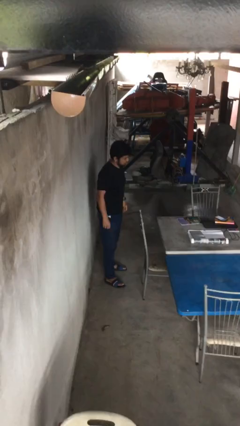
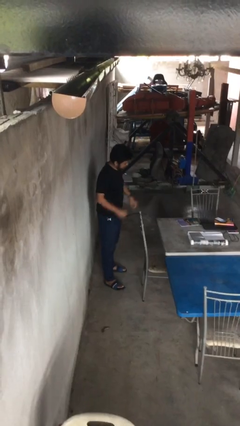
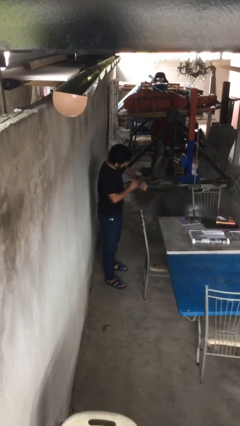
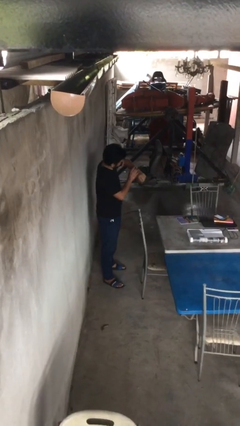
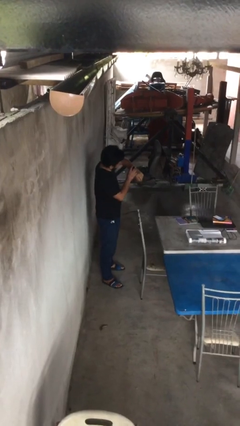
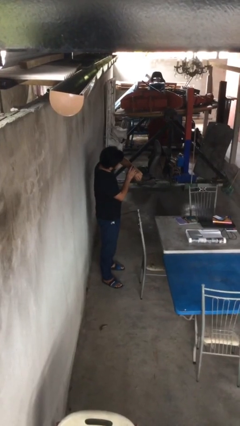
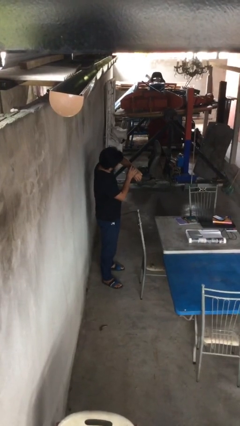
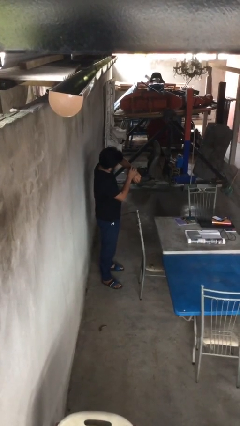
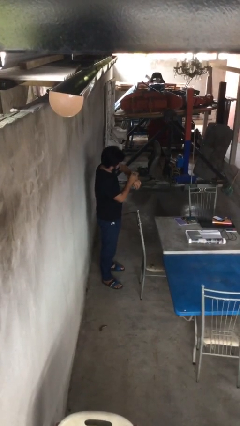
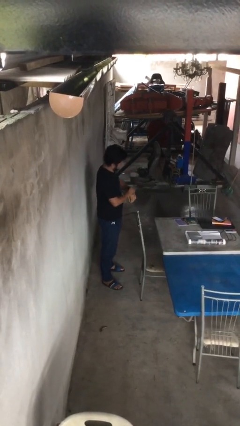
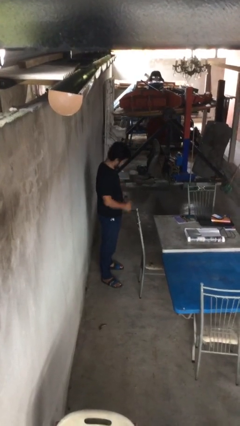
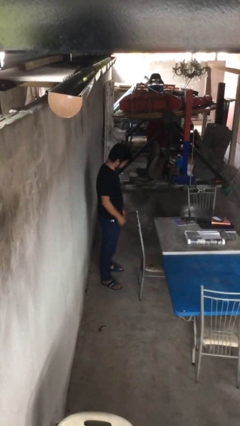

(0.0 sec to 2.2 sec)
person looks at wristwatch

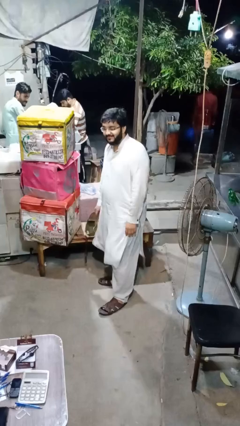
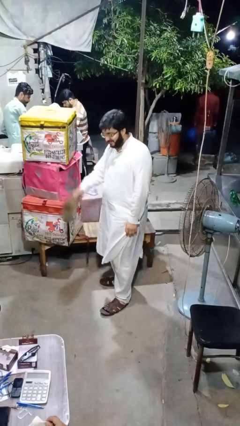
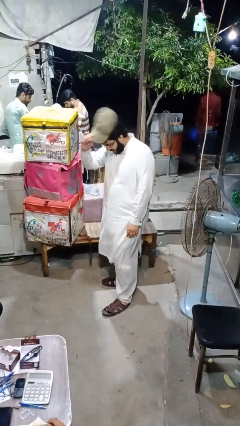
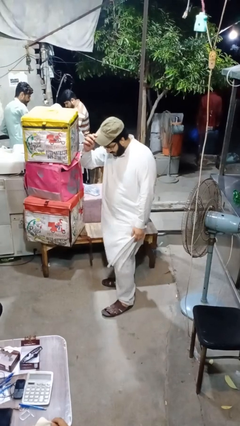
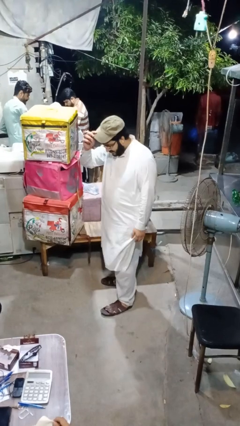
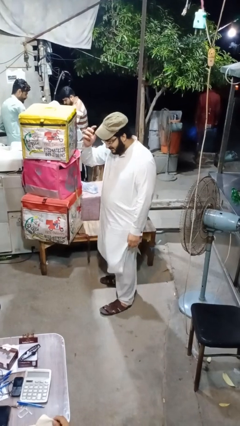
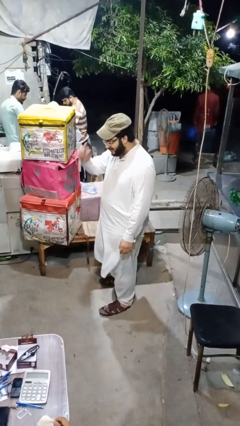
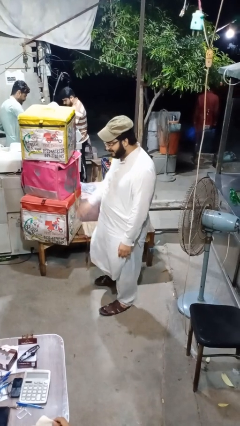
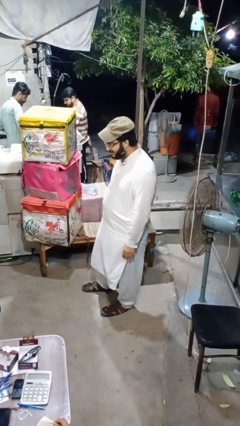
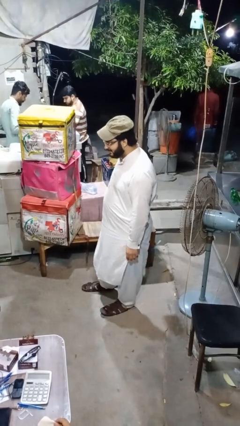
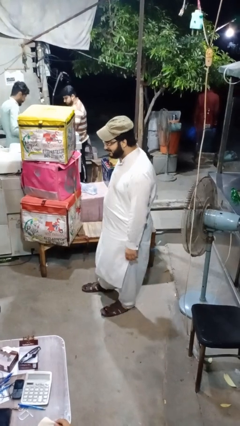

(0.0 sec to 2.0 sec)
person puts on hat

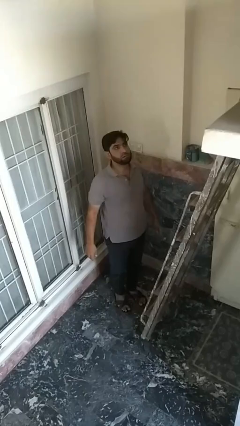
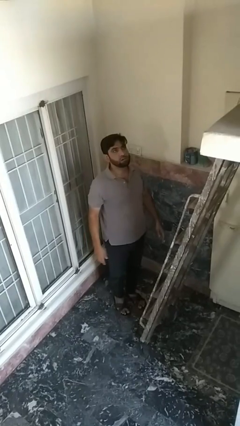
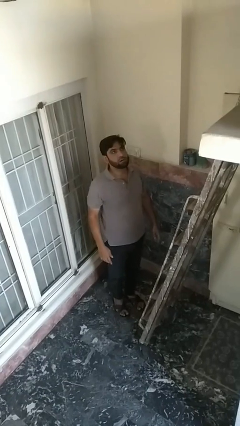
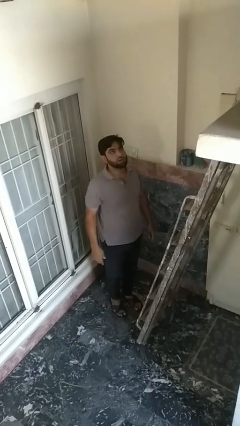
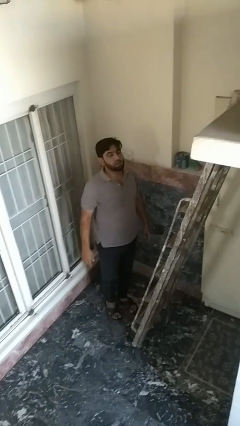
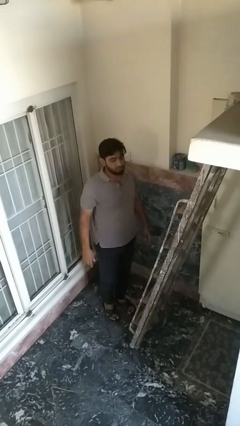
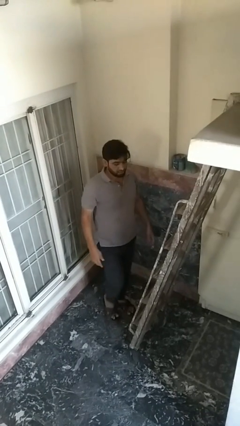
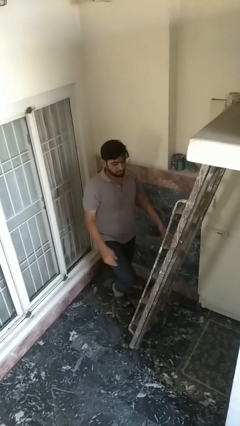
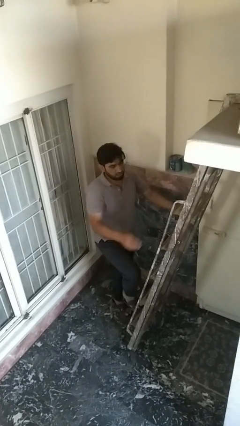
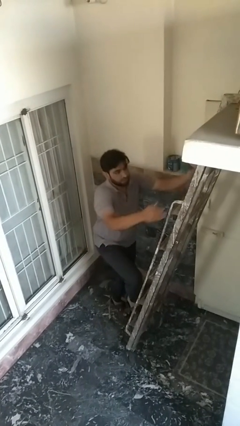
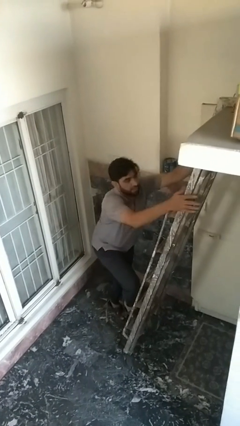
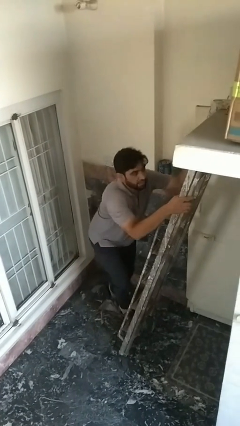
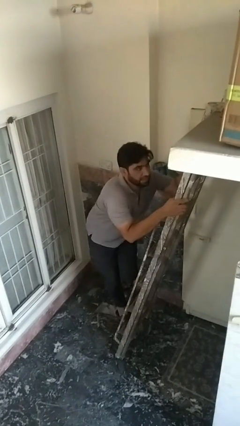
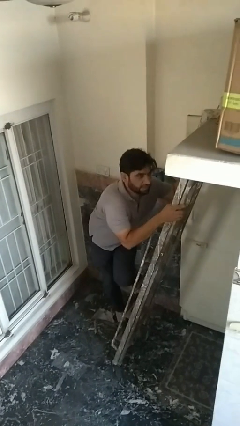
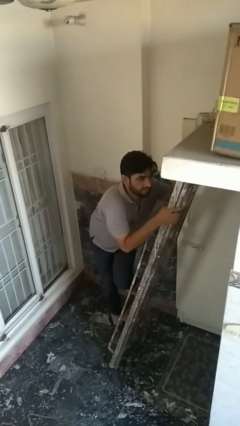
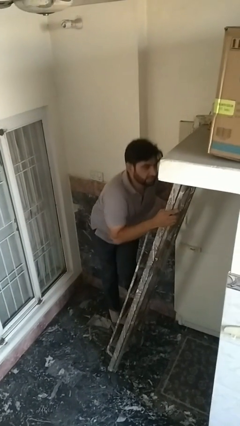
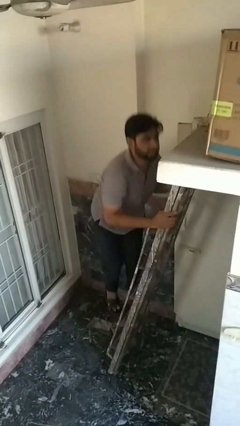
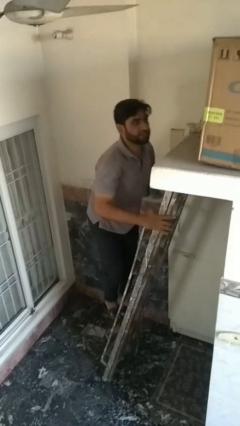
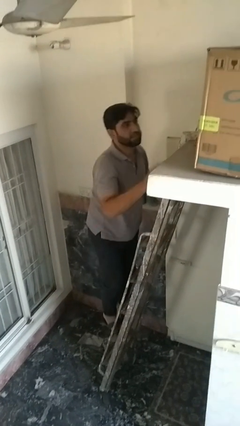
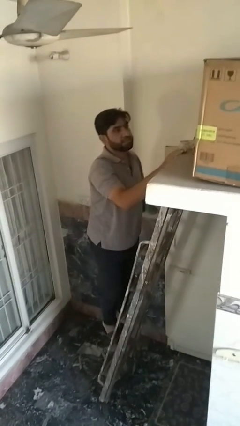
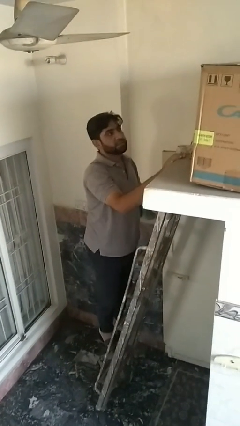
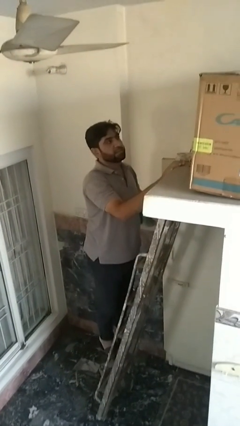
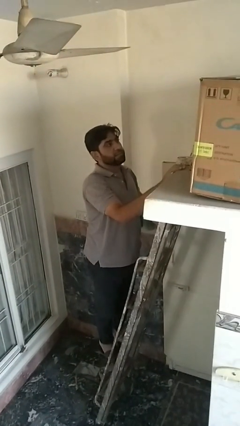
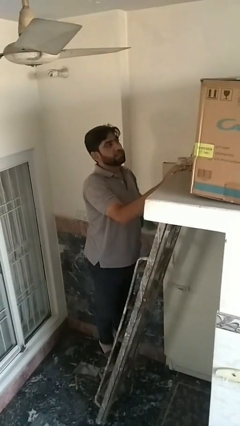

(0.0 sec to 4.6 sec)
person climbs up ladder

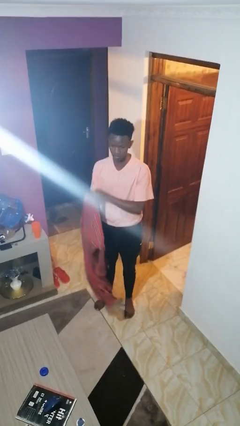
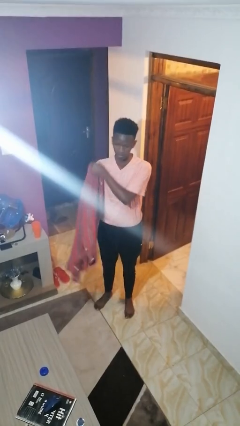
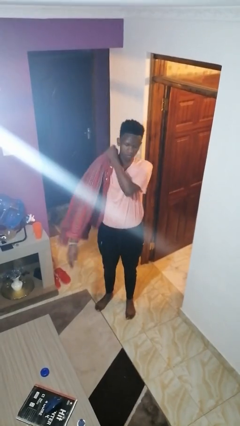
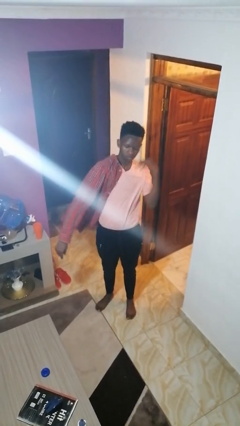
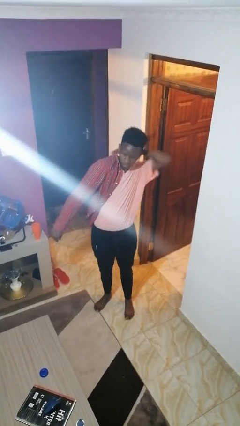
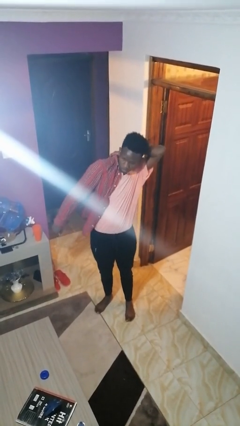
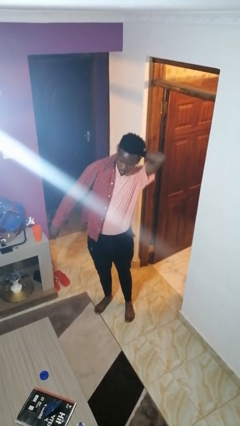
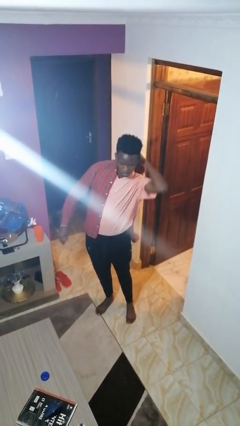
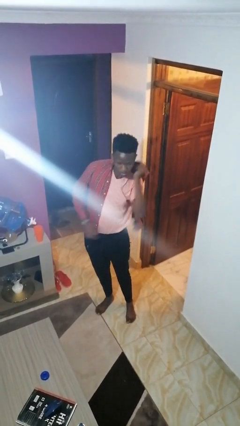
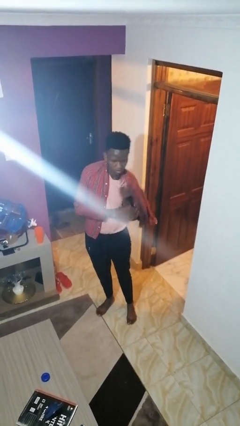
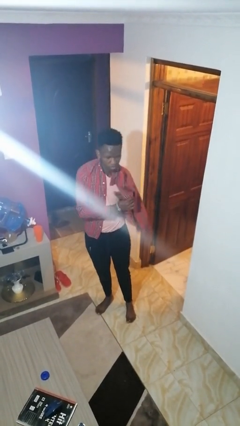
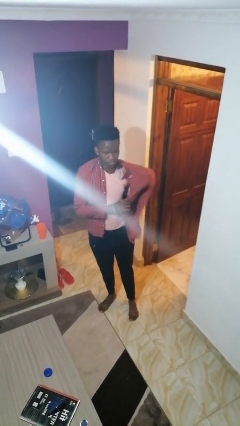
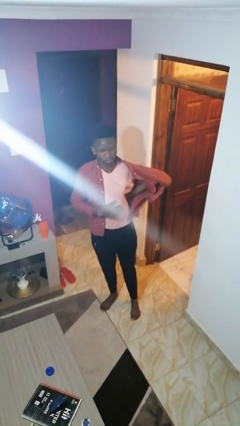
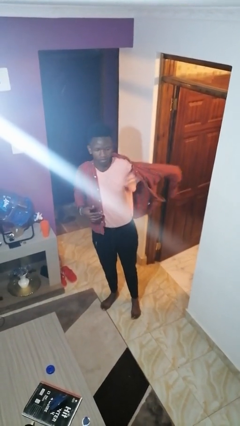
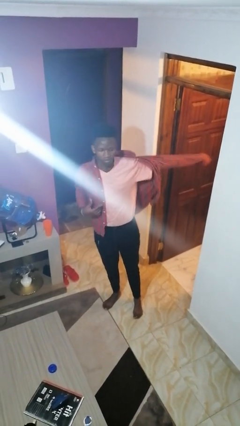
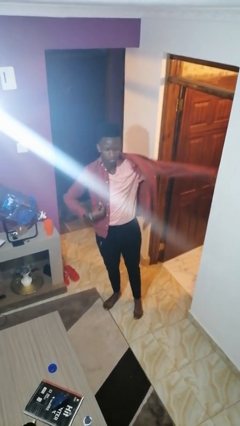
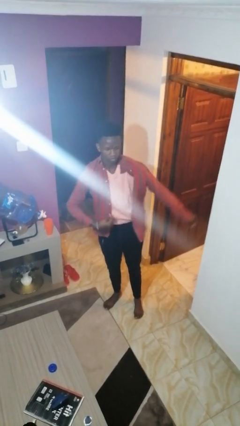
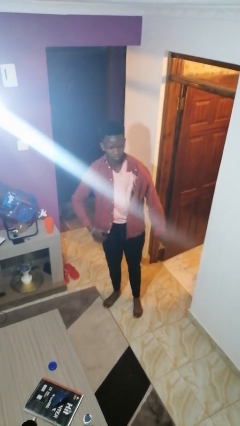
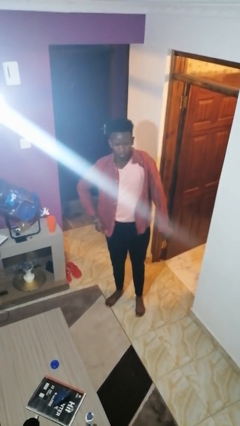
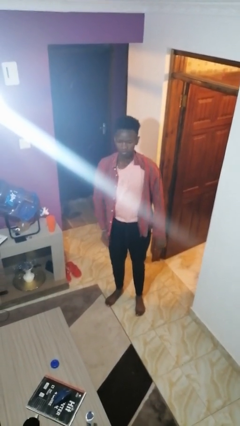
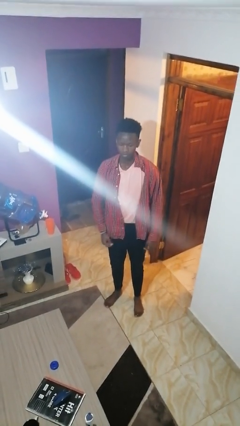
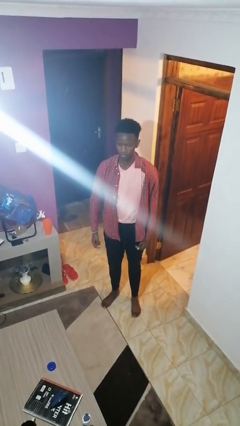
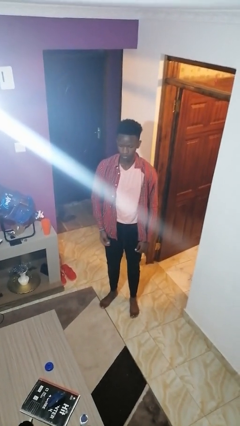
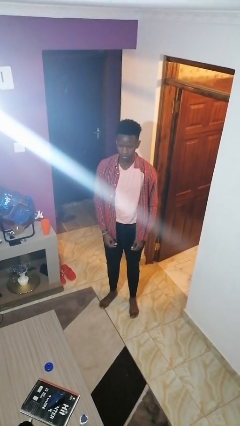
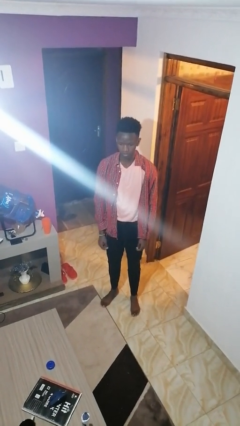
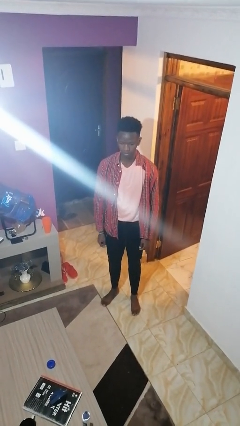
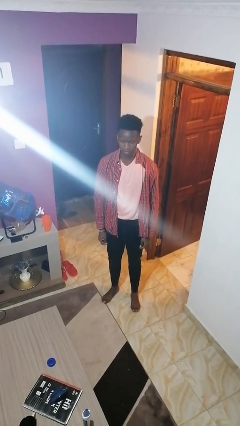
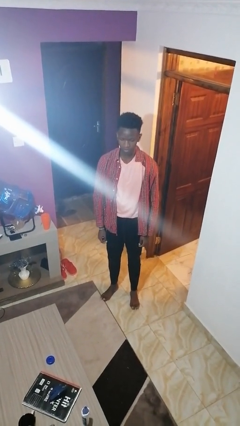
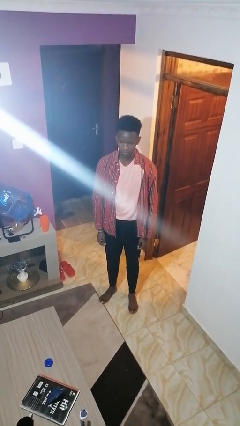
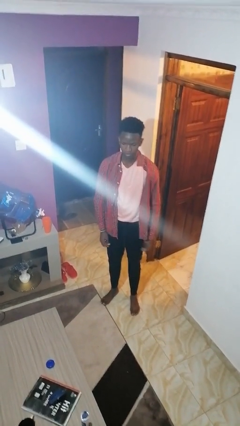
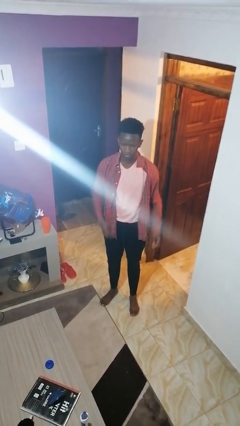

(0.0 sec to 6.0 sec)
person puts on shirt

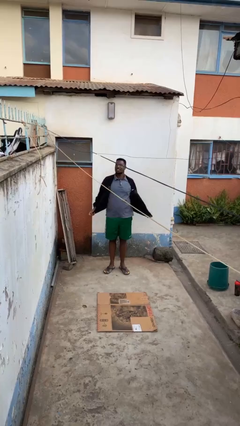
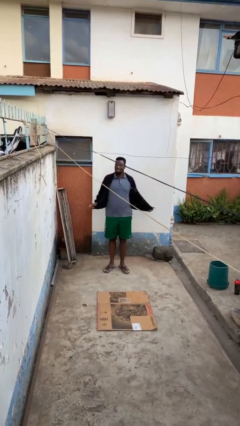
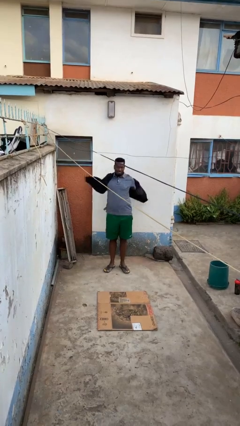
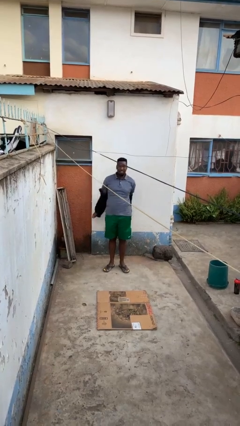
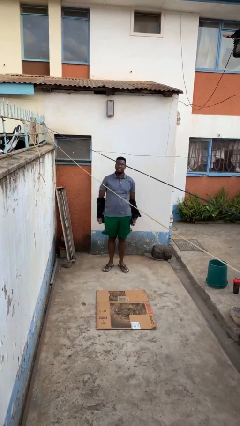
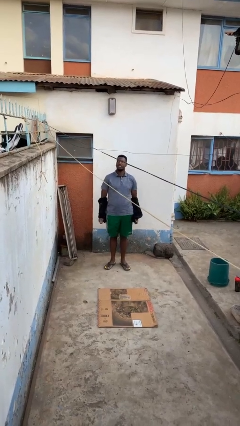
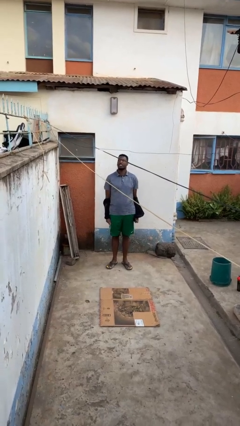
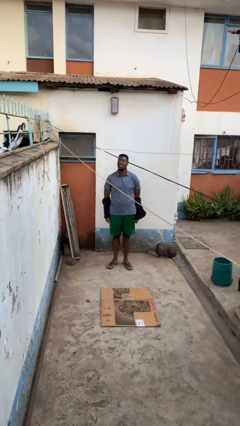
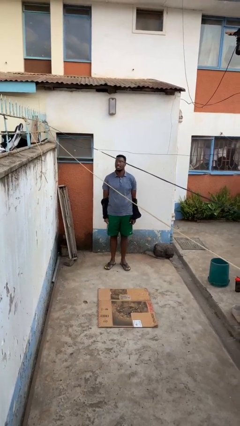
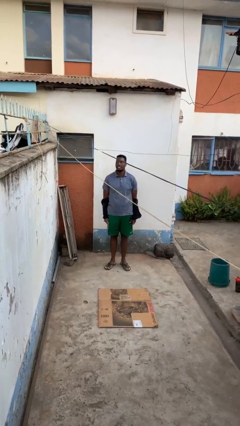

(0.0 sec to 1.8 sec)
person takes off jacket

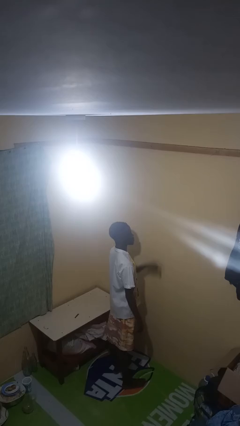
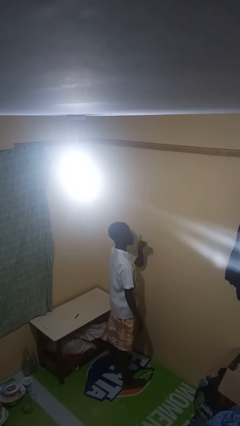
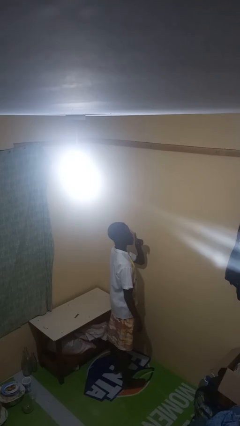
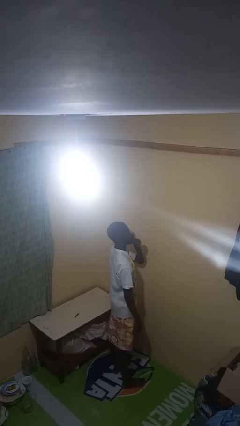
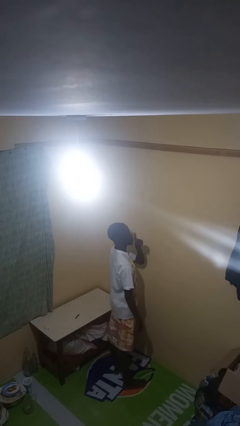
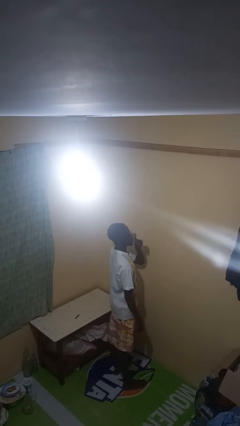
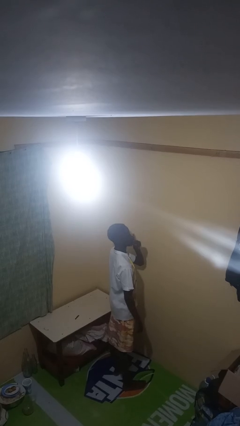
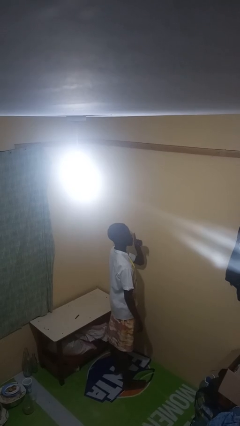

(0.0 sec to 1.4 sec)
person gestures be quiet
